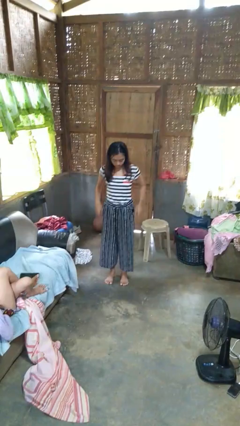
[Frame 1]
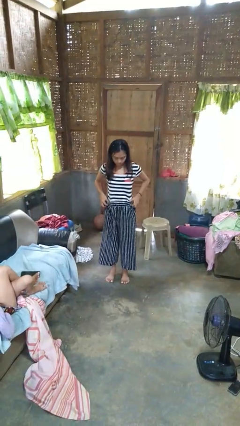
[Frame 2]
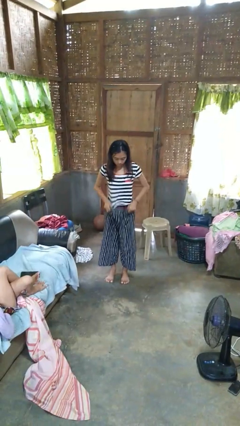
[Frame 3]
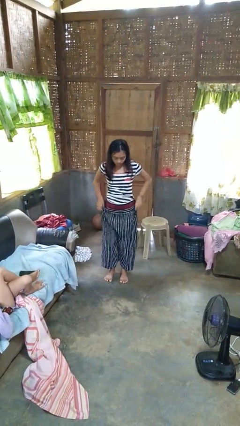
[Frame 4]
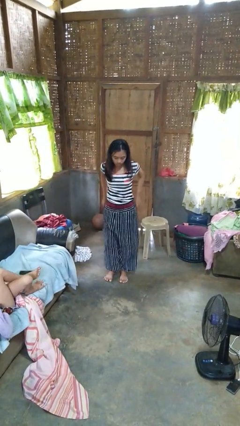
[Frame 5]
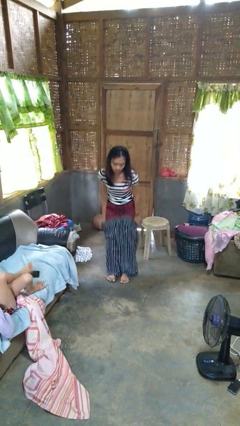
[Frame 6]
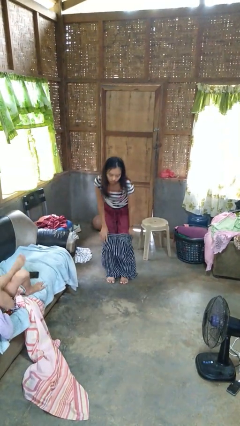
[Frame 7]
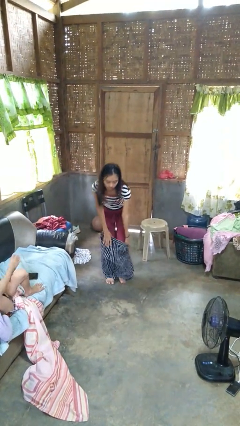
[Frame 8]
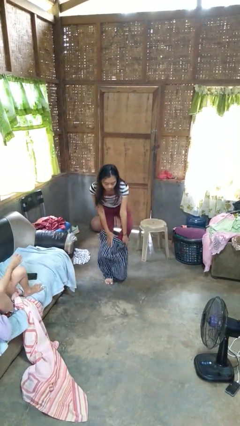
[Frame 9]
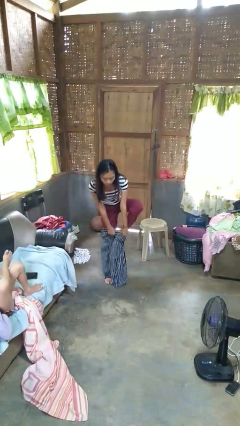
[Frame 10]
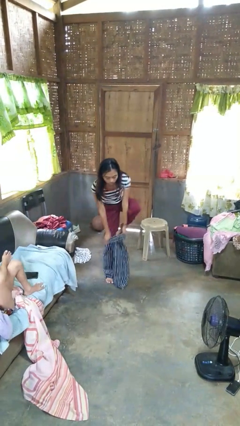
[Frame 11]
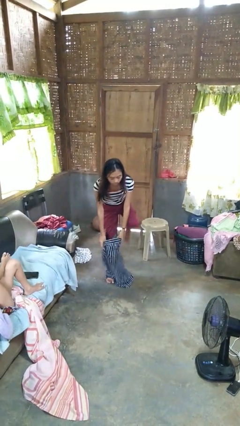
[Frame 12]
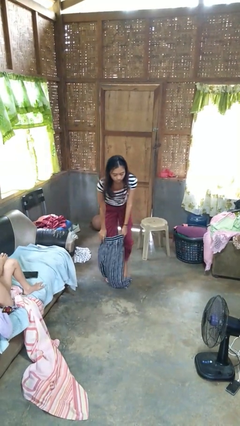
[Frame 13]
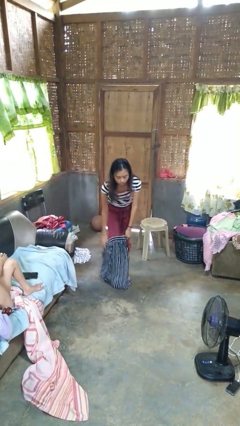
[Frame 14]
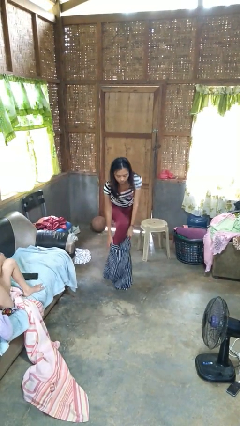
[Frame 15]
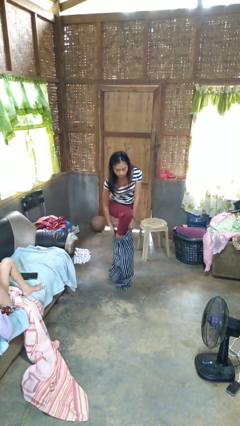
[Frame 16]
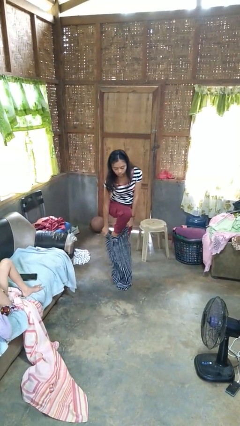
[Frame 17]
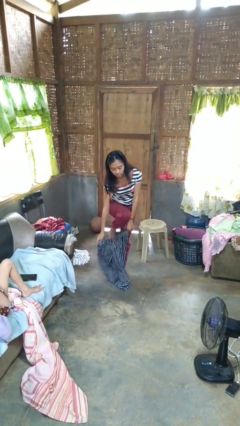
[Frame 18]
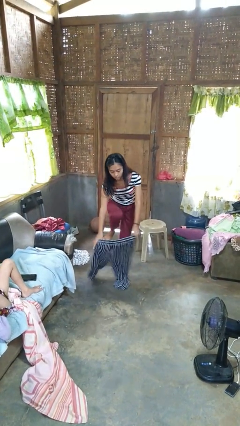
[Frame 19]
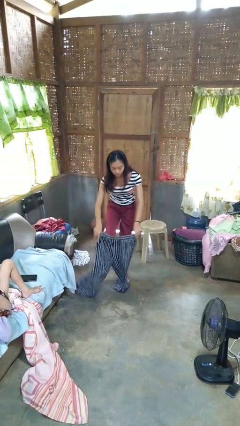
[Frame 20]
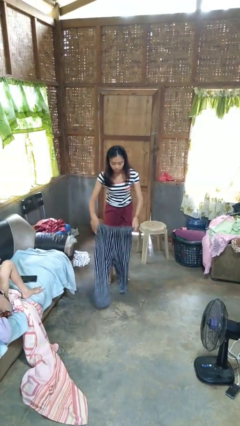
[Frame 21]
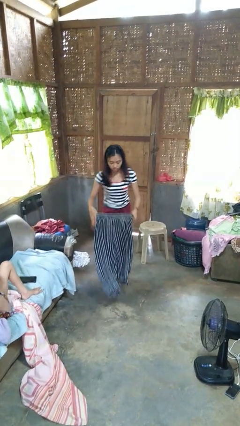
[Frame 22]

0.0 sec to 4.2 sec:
person takes off pants

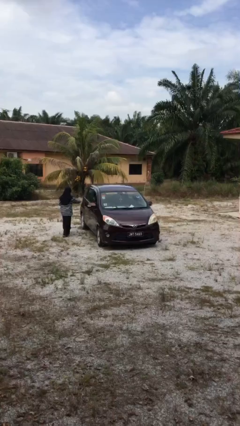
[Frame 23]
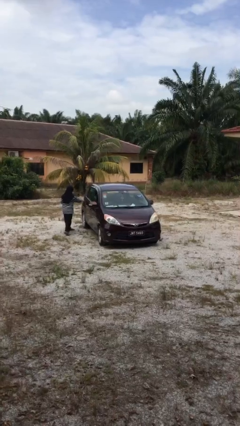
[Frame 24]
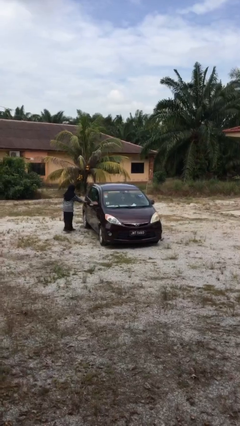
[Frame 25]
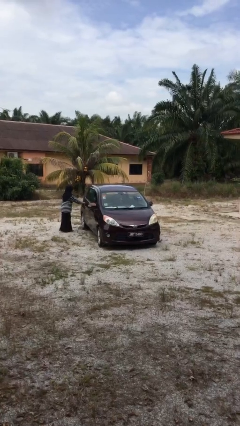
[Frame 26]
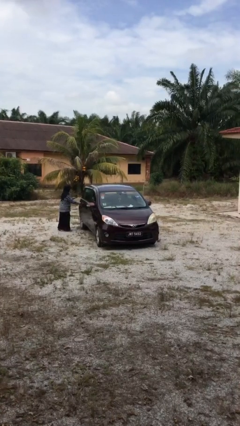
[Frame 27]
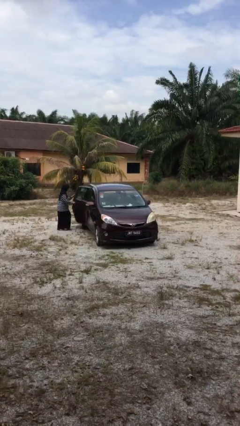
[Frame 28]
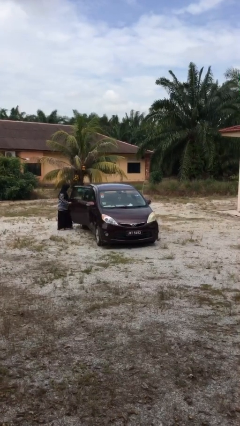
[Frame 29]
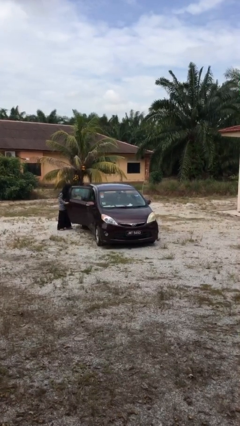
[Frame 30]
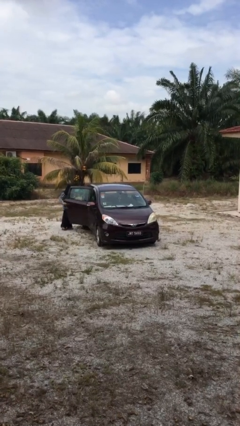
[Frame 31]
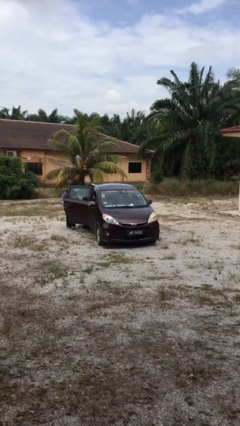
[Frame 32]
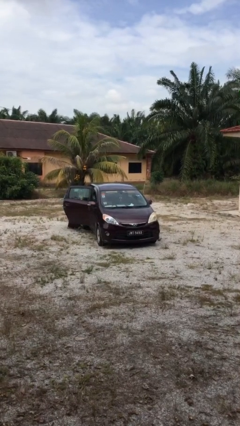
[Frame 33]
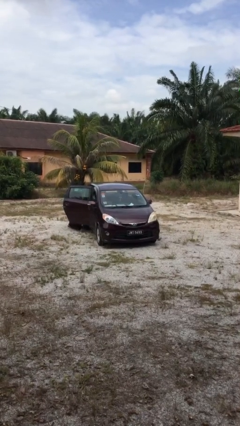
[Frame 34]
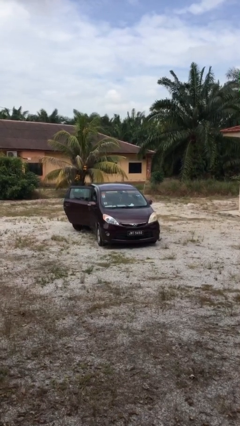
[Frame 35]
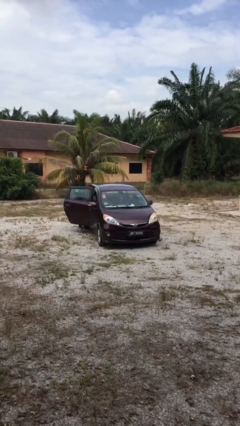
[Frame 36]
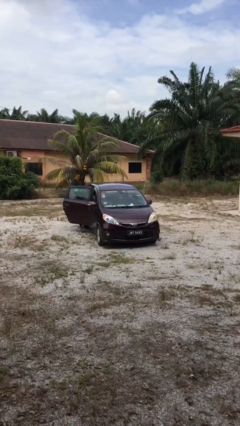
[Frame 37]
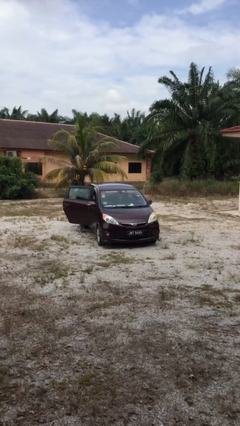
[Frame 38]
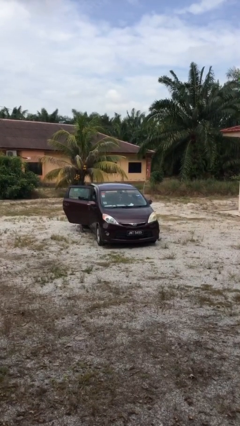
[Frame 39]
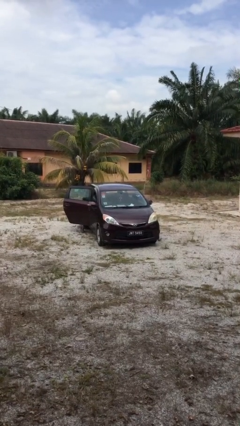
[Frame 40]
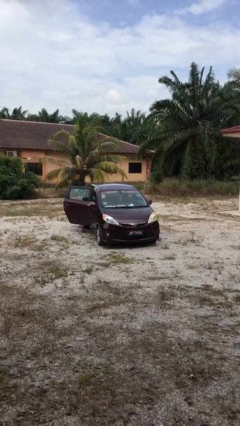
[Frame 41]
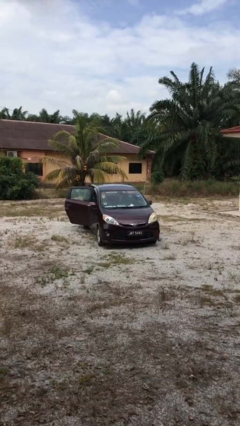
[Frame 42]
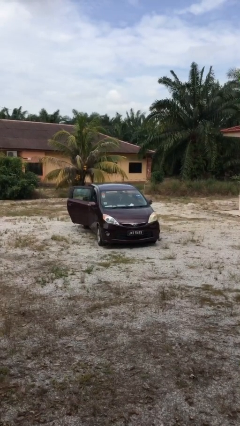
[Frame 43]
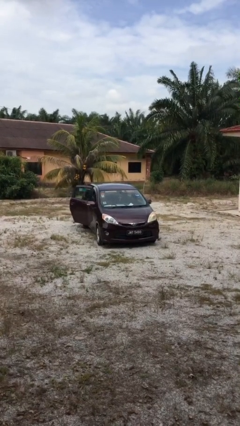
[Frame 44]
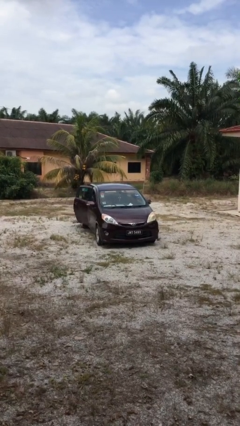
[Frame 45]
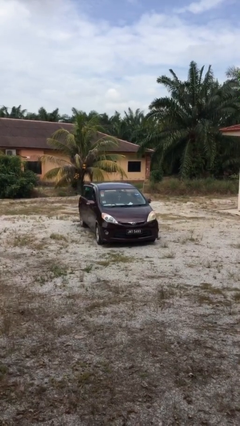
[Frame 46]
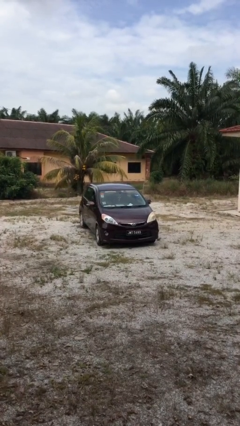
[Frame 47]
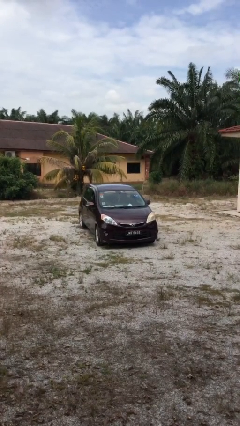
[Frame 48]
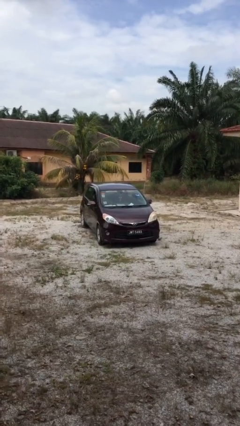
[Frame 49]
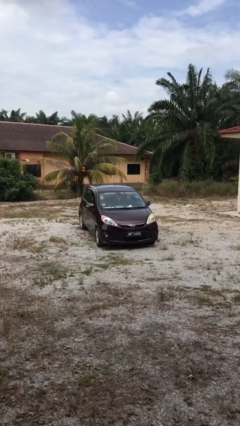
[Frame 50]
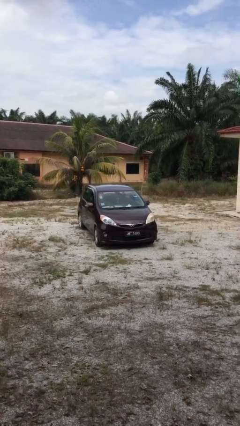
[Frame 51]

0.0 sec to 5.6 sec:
car picks up person

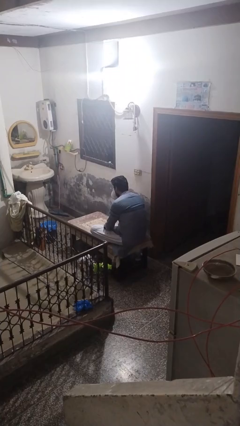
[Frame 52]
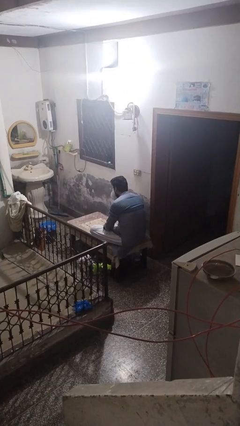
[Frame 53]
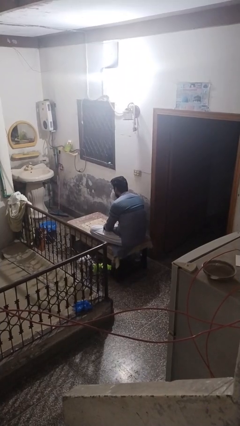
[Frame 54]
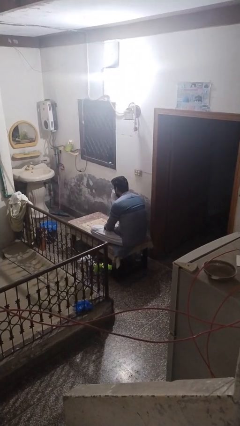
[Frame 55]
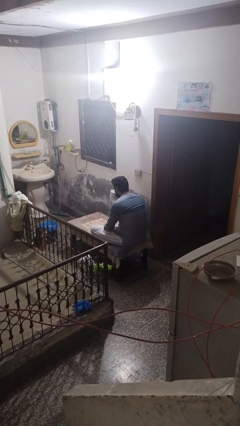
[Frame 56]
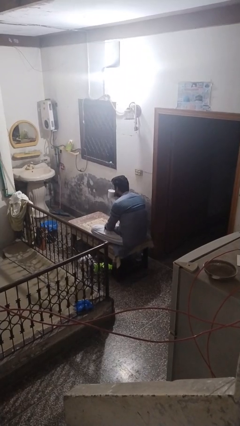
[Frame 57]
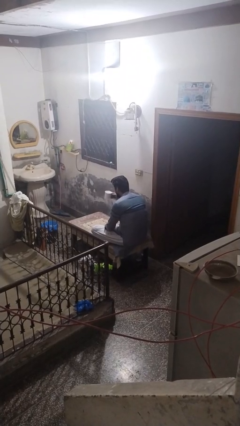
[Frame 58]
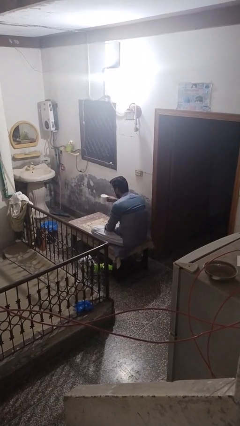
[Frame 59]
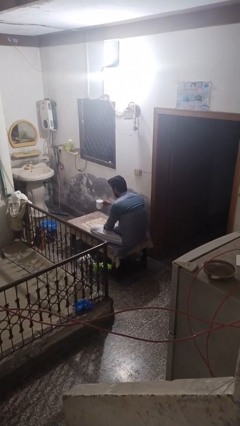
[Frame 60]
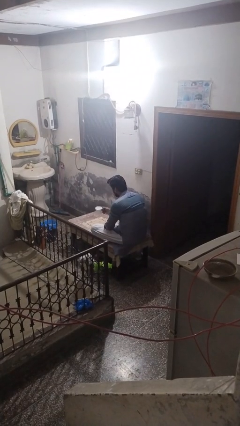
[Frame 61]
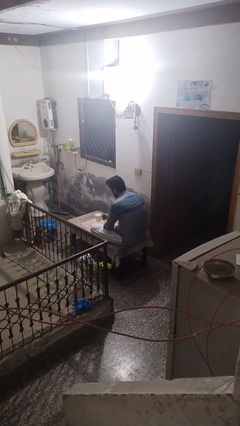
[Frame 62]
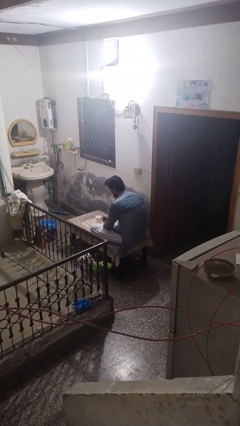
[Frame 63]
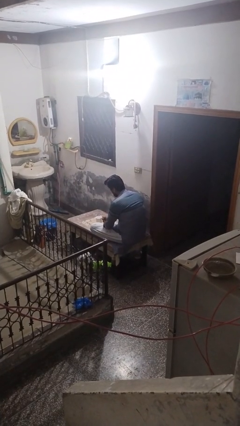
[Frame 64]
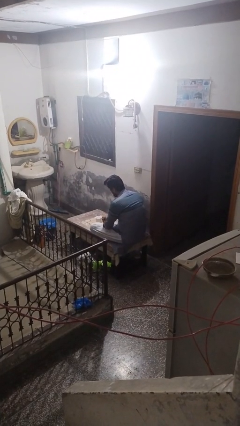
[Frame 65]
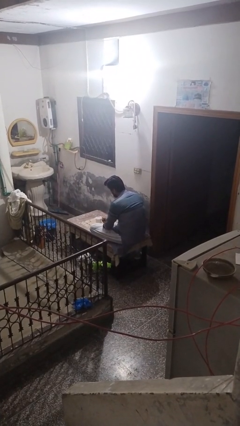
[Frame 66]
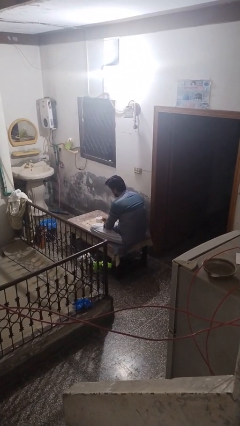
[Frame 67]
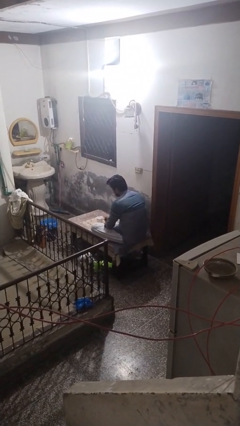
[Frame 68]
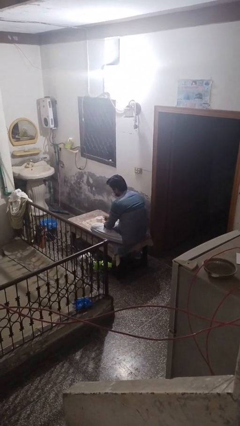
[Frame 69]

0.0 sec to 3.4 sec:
person puts down object on table

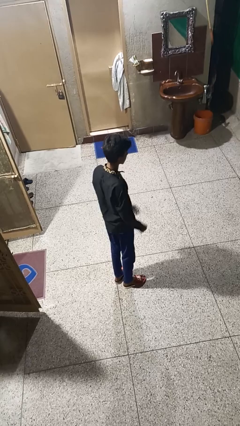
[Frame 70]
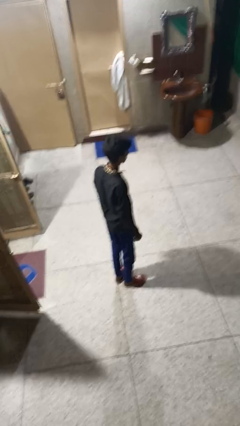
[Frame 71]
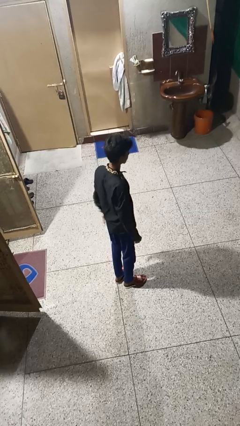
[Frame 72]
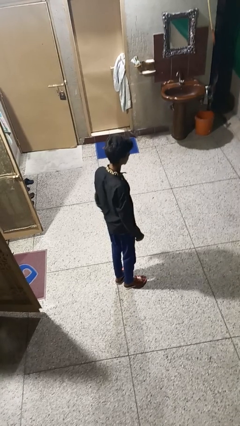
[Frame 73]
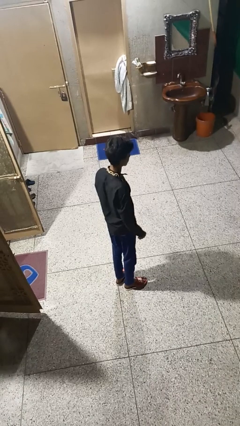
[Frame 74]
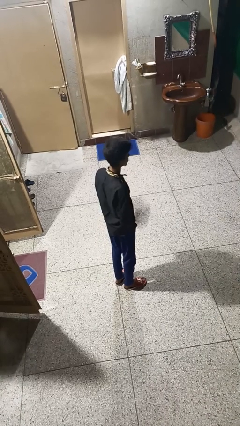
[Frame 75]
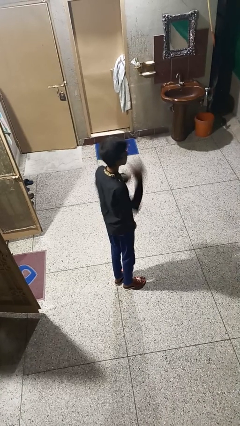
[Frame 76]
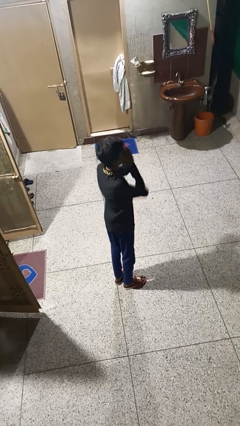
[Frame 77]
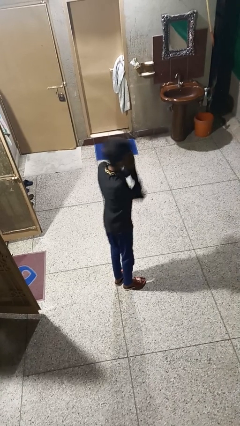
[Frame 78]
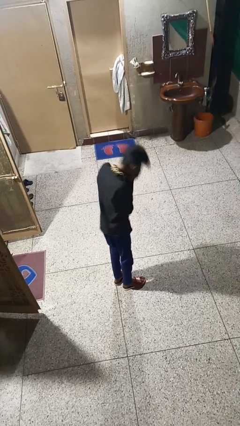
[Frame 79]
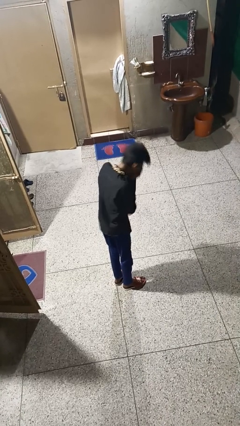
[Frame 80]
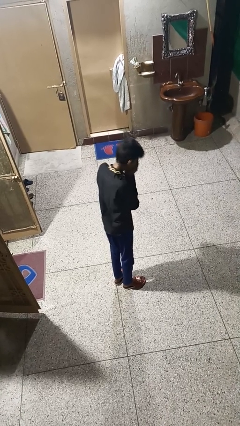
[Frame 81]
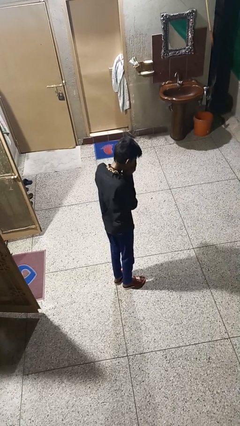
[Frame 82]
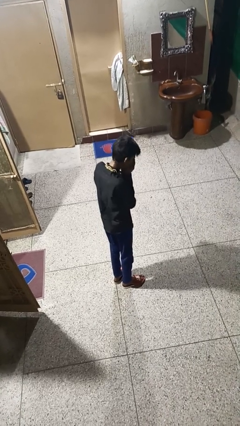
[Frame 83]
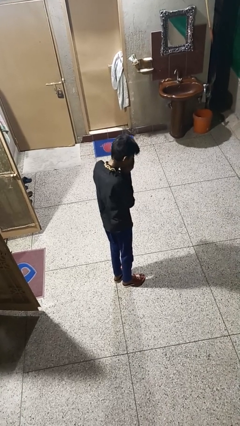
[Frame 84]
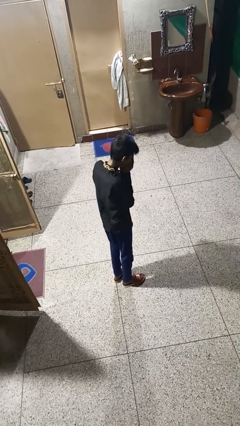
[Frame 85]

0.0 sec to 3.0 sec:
person sneezes into hand

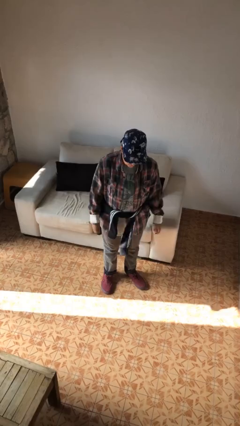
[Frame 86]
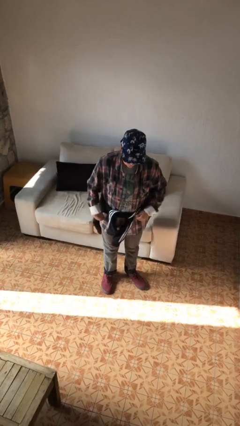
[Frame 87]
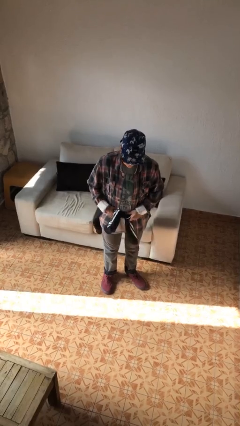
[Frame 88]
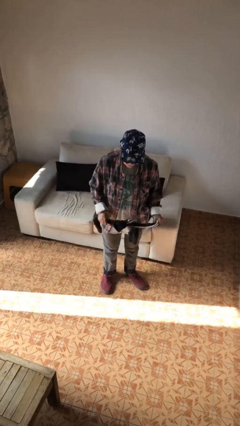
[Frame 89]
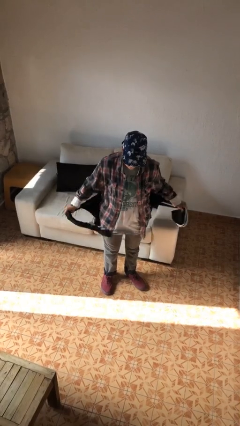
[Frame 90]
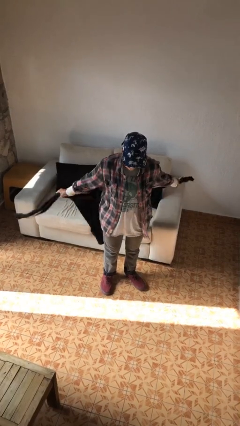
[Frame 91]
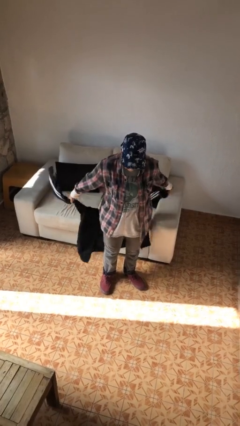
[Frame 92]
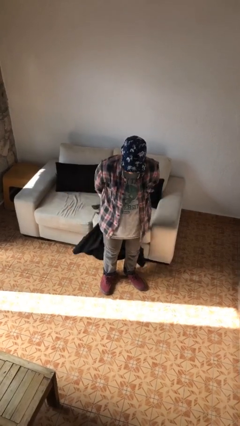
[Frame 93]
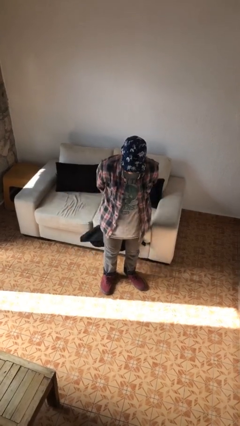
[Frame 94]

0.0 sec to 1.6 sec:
person unties jacket around waist
